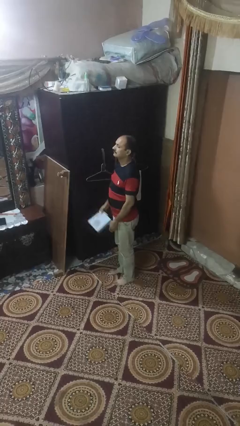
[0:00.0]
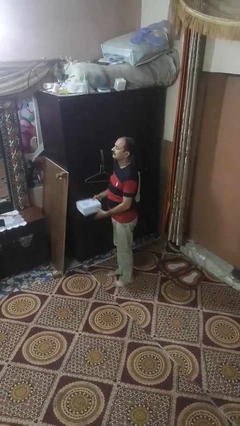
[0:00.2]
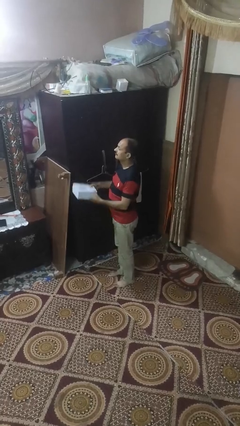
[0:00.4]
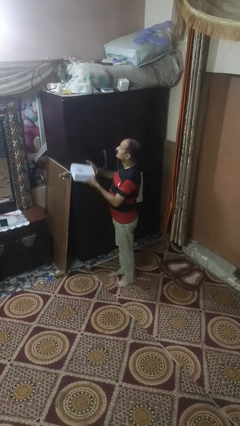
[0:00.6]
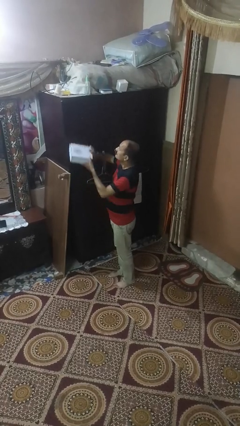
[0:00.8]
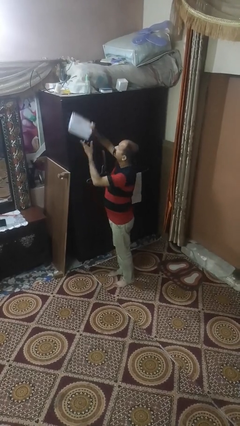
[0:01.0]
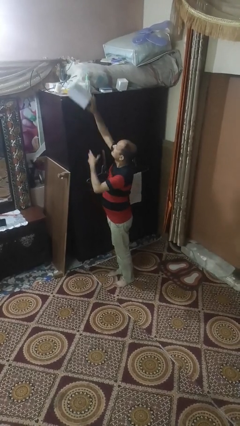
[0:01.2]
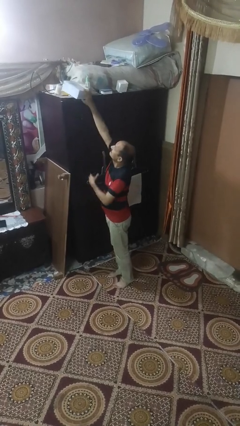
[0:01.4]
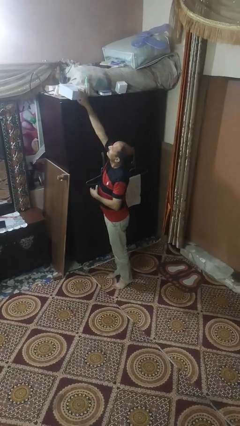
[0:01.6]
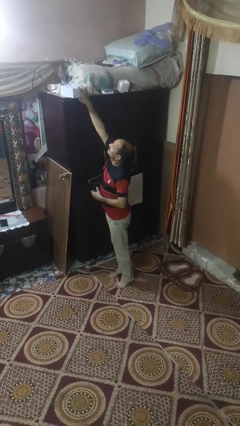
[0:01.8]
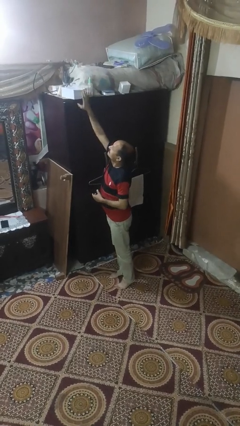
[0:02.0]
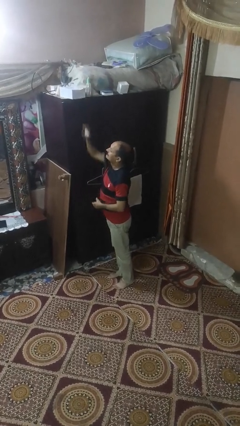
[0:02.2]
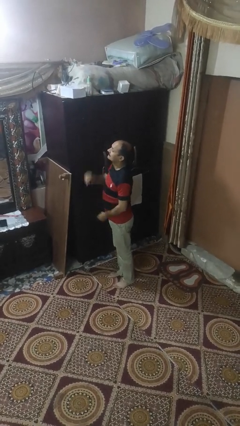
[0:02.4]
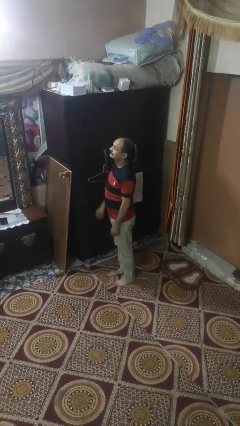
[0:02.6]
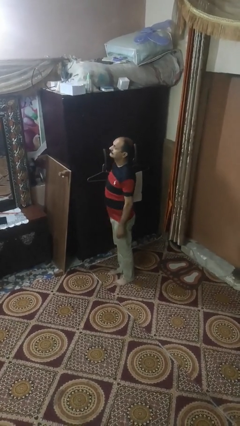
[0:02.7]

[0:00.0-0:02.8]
person picks up object from shelf

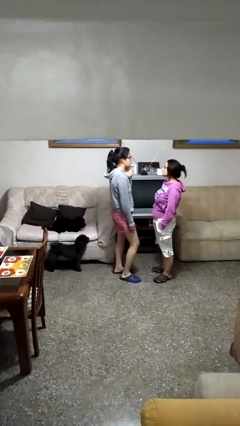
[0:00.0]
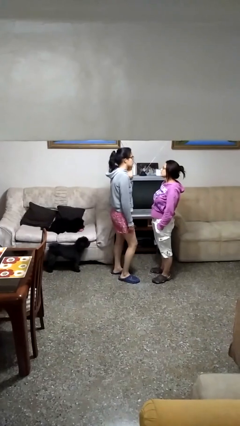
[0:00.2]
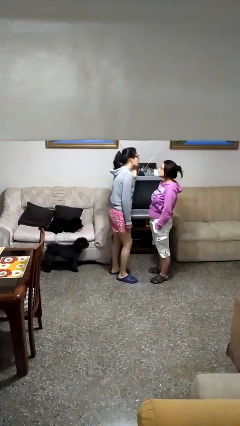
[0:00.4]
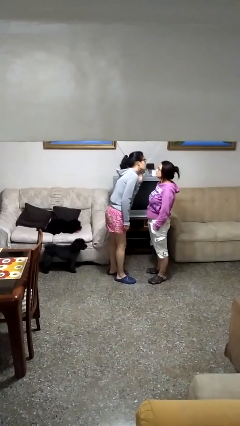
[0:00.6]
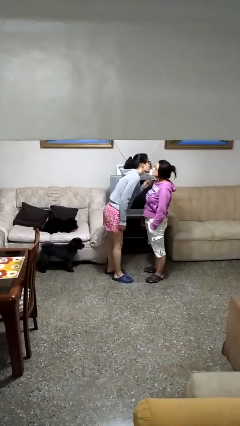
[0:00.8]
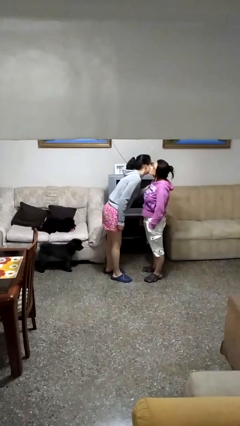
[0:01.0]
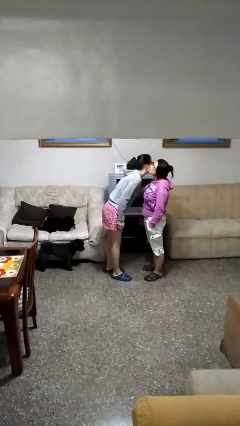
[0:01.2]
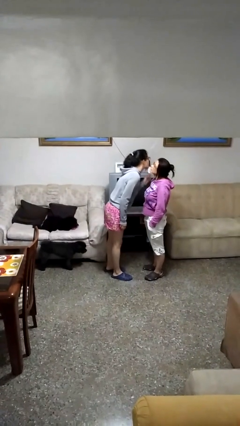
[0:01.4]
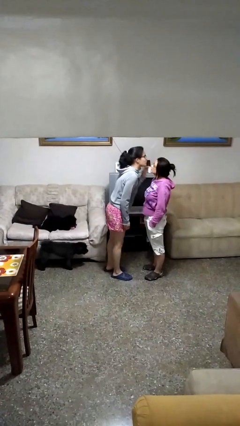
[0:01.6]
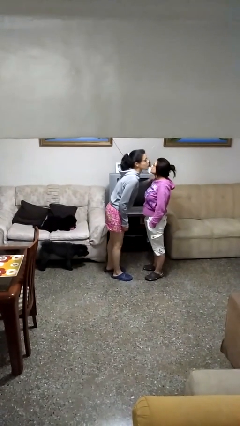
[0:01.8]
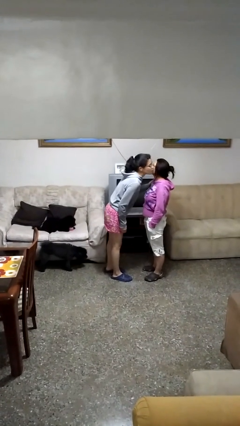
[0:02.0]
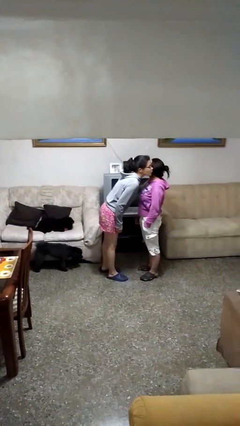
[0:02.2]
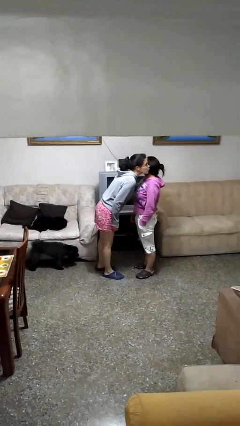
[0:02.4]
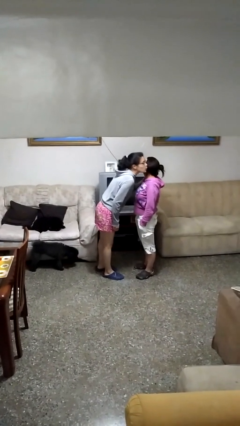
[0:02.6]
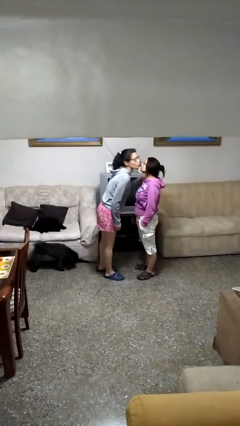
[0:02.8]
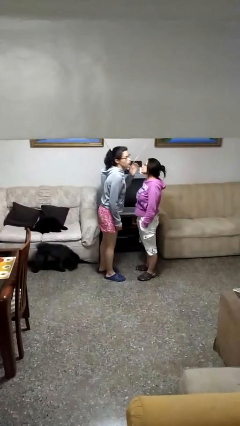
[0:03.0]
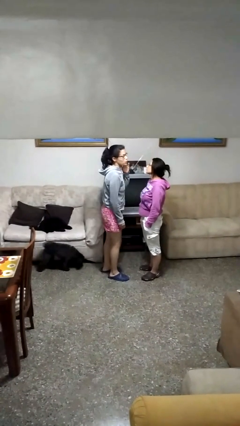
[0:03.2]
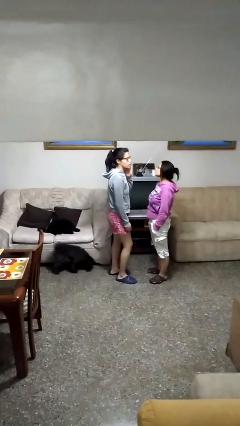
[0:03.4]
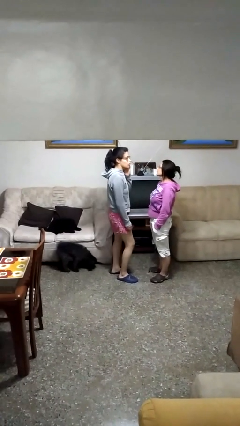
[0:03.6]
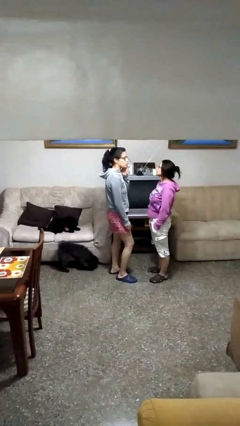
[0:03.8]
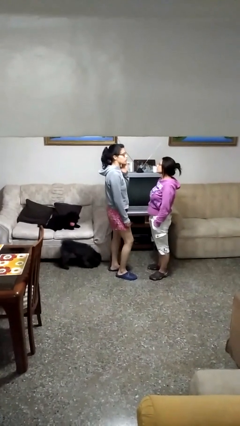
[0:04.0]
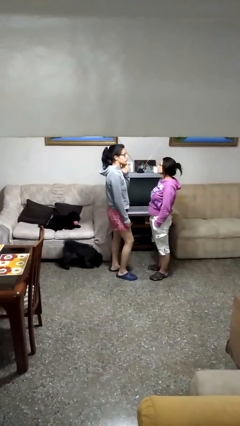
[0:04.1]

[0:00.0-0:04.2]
person kisses cheek of person

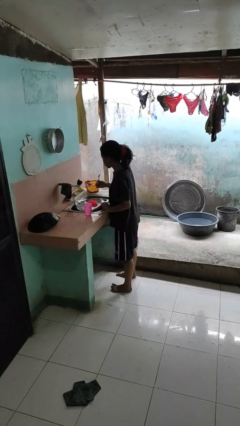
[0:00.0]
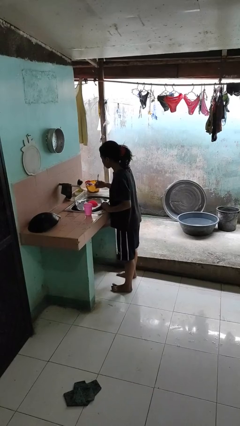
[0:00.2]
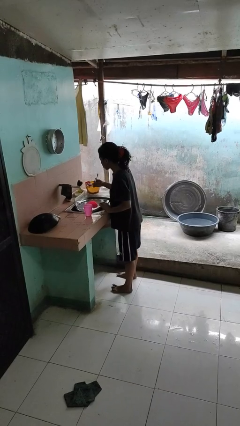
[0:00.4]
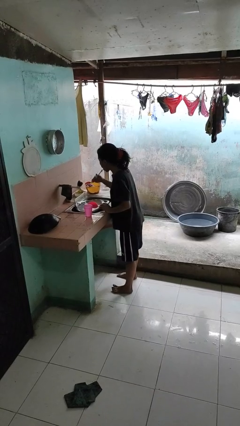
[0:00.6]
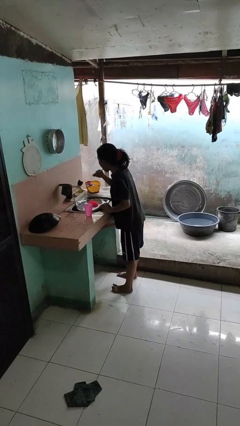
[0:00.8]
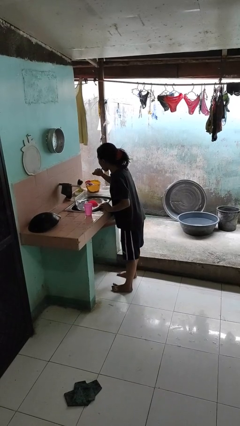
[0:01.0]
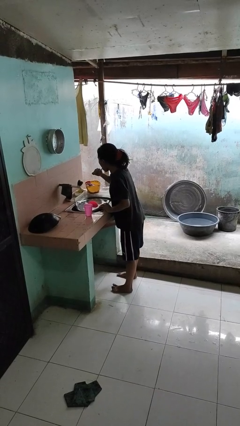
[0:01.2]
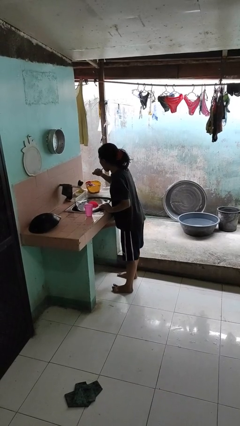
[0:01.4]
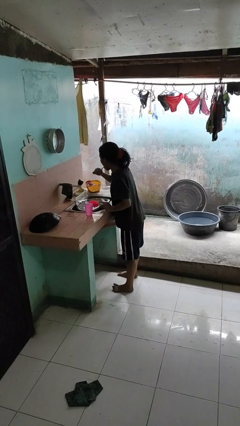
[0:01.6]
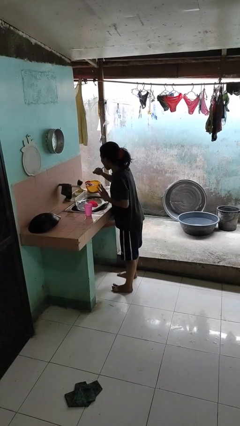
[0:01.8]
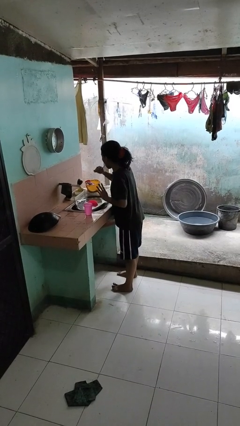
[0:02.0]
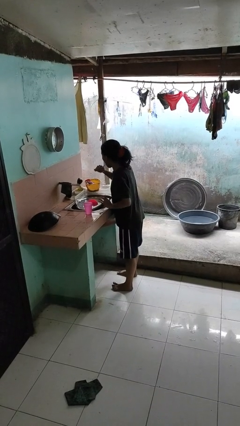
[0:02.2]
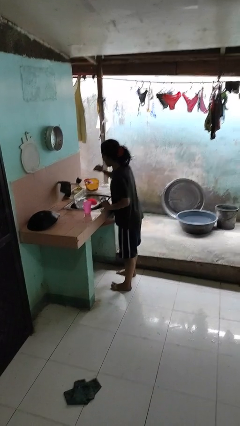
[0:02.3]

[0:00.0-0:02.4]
person brushes teeth

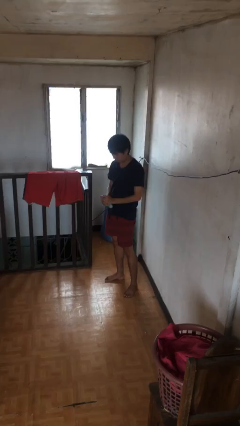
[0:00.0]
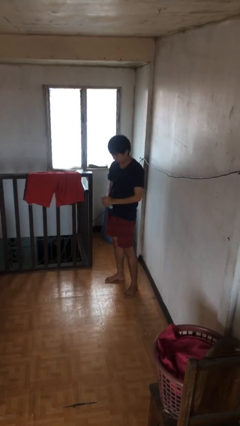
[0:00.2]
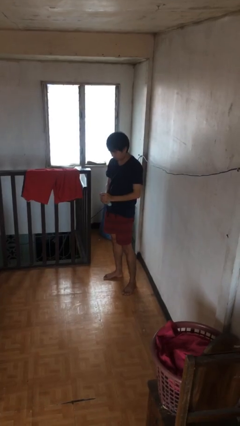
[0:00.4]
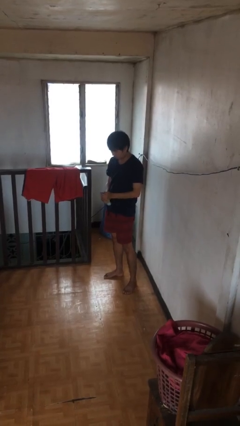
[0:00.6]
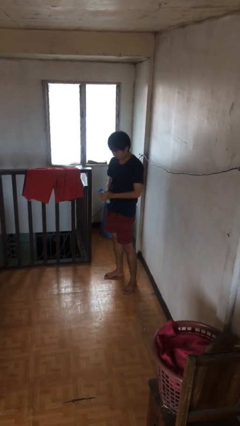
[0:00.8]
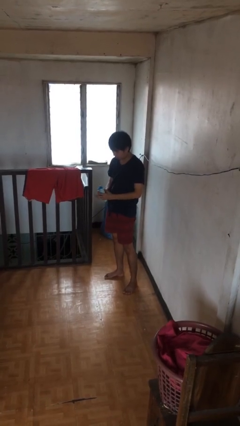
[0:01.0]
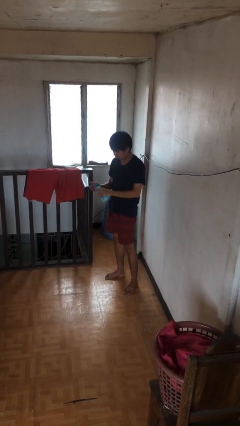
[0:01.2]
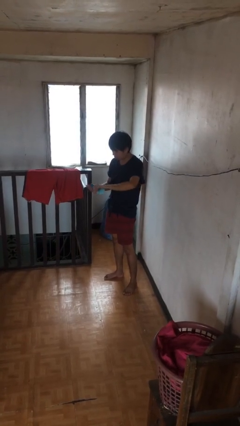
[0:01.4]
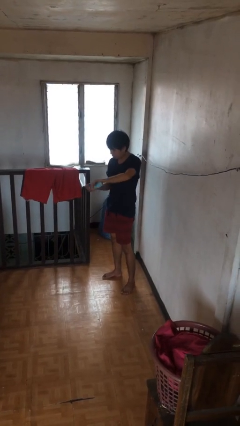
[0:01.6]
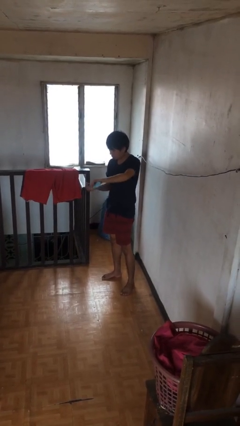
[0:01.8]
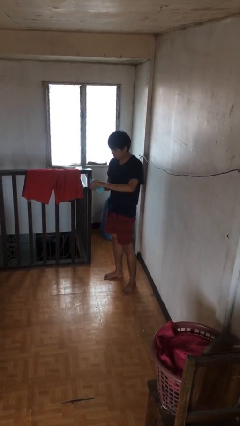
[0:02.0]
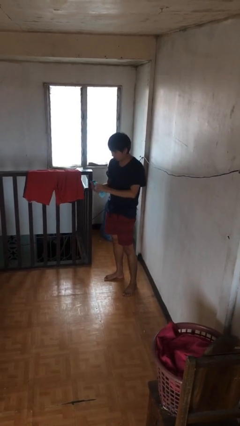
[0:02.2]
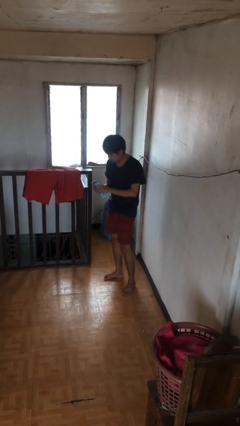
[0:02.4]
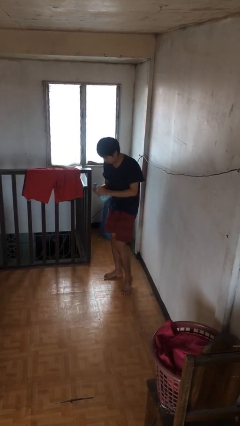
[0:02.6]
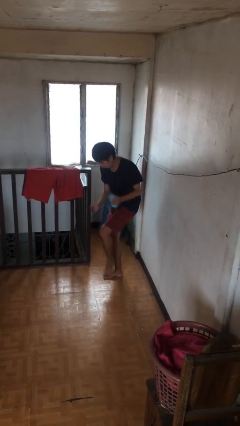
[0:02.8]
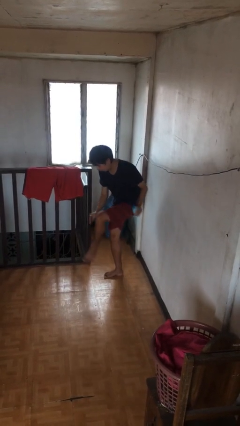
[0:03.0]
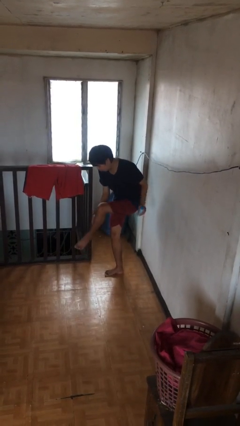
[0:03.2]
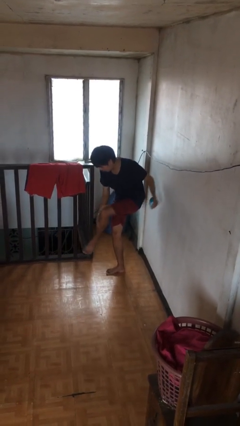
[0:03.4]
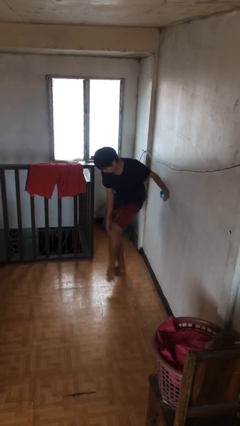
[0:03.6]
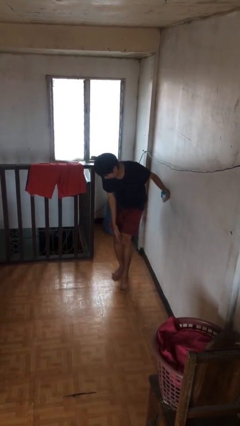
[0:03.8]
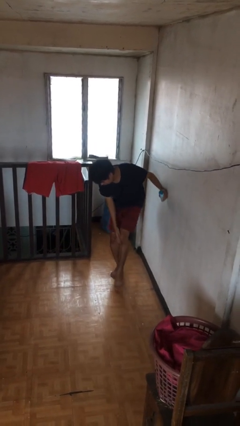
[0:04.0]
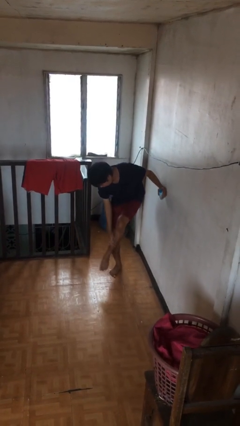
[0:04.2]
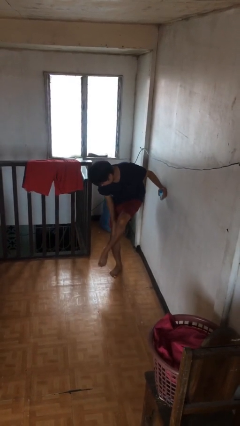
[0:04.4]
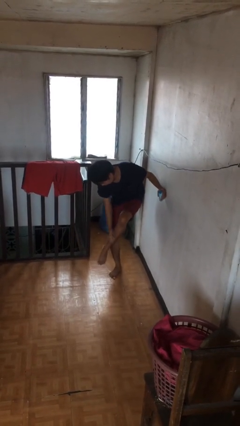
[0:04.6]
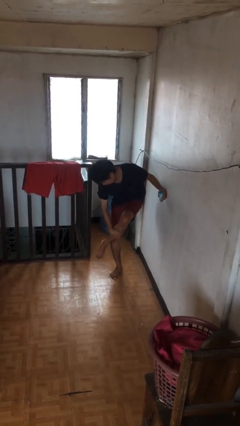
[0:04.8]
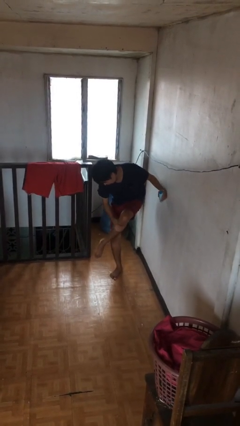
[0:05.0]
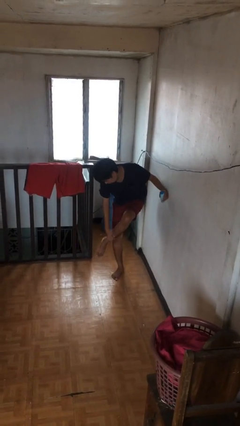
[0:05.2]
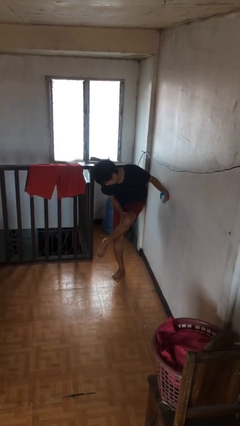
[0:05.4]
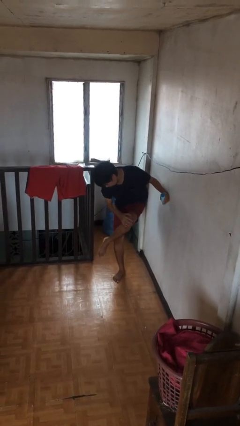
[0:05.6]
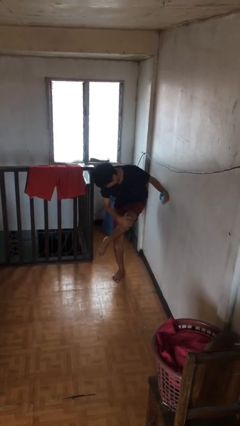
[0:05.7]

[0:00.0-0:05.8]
person applies sunscreen

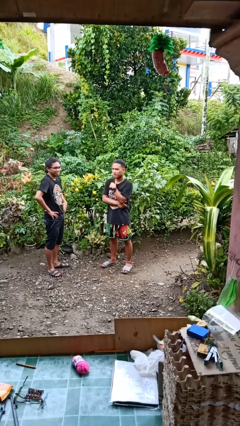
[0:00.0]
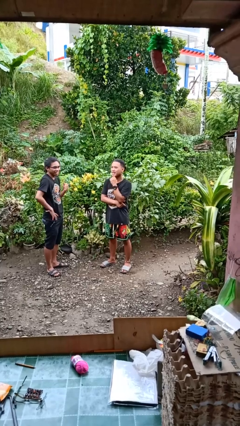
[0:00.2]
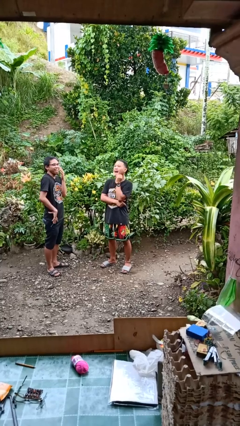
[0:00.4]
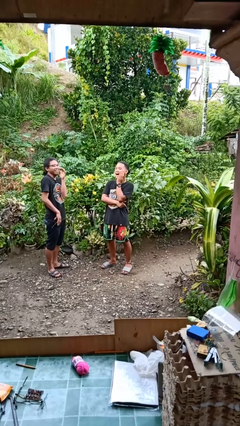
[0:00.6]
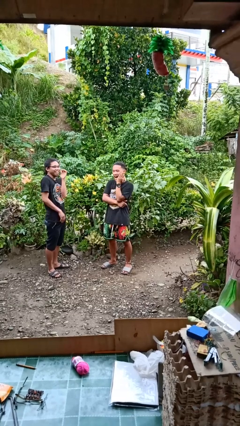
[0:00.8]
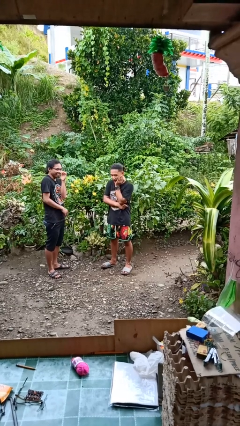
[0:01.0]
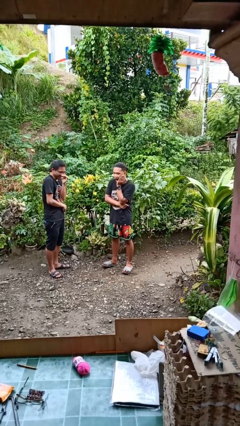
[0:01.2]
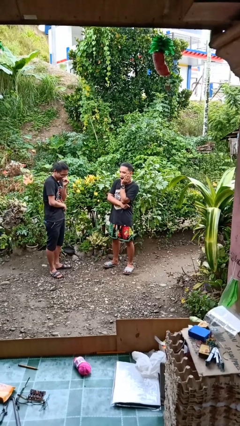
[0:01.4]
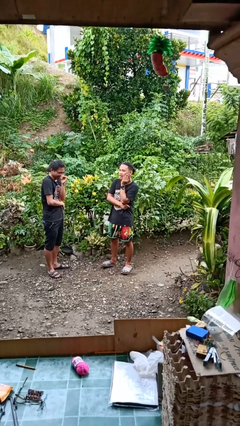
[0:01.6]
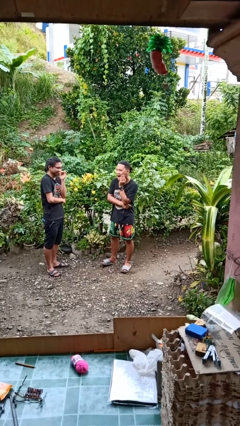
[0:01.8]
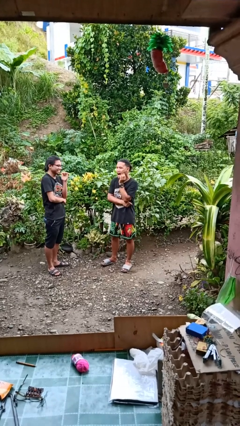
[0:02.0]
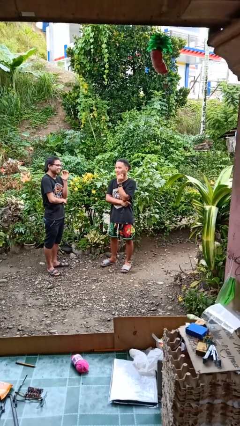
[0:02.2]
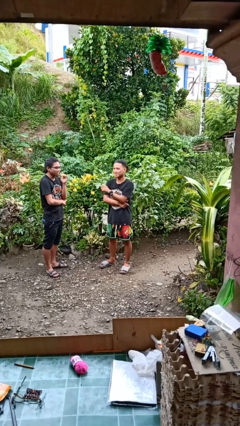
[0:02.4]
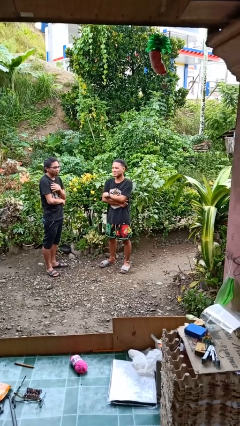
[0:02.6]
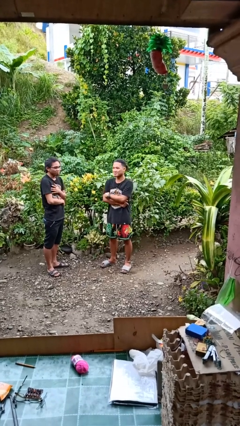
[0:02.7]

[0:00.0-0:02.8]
person laughs with person
